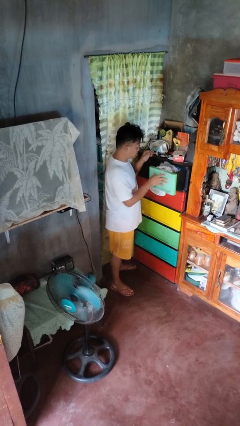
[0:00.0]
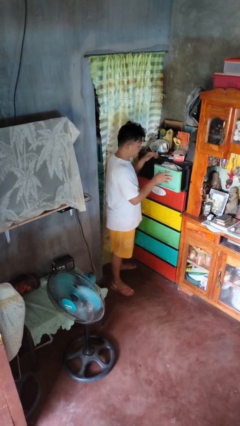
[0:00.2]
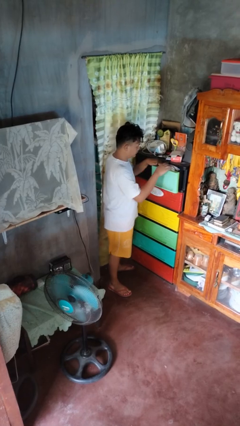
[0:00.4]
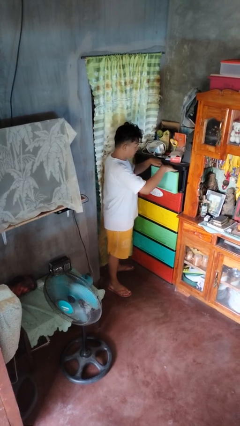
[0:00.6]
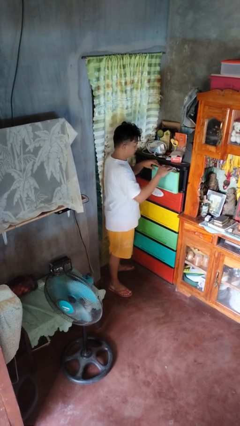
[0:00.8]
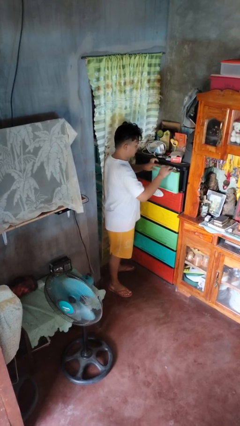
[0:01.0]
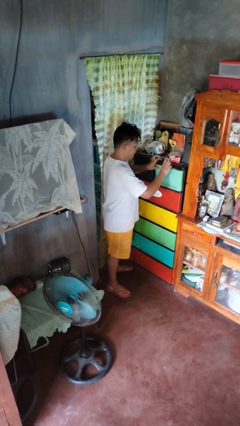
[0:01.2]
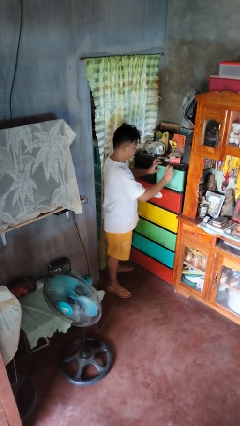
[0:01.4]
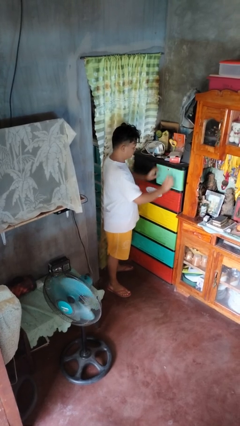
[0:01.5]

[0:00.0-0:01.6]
person closes dresser drawer

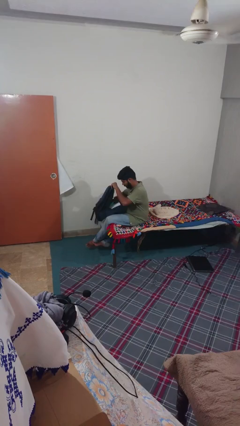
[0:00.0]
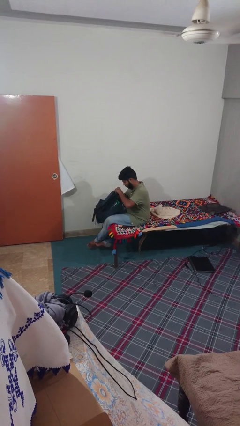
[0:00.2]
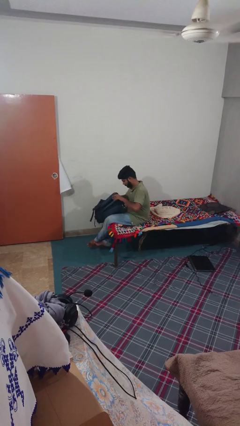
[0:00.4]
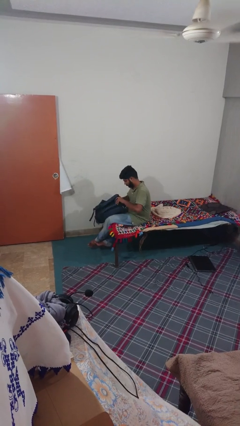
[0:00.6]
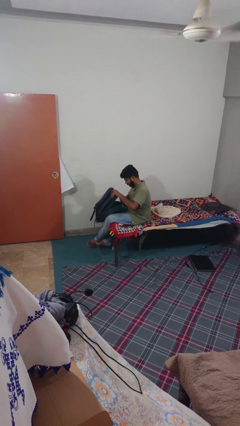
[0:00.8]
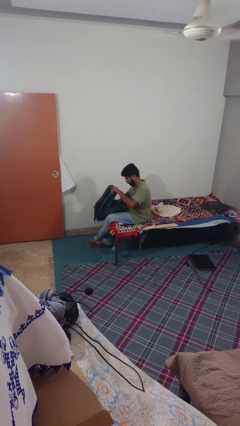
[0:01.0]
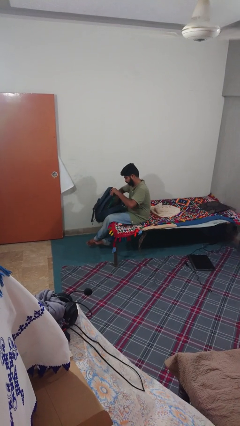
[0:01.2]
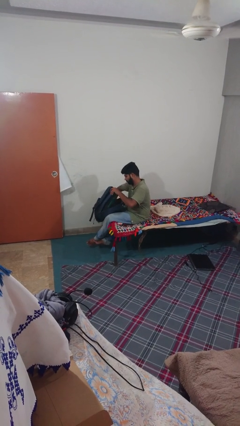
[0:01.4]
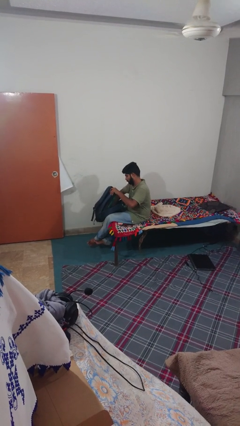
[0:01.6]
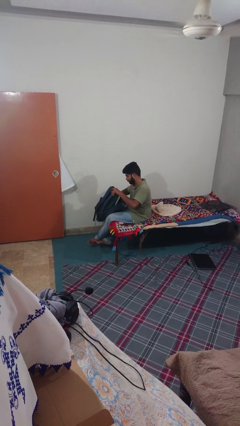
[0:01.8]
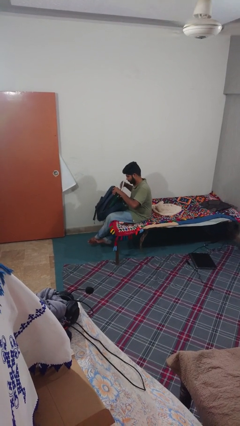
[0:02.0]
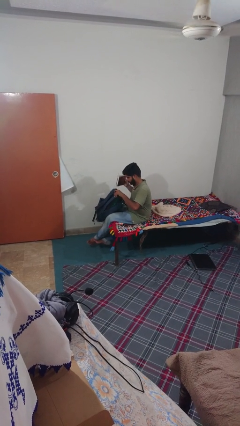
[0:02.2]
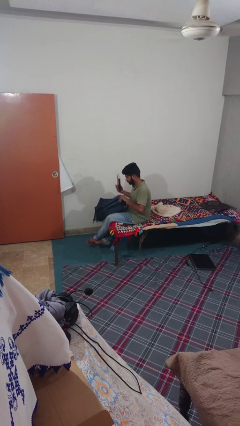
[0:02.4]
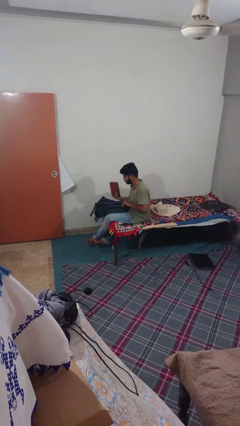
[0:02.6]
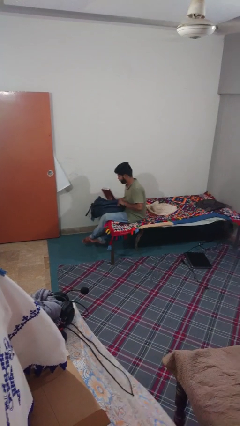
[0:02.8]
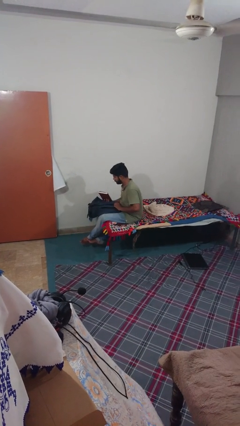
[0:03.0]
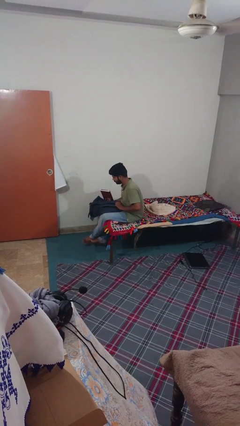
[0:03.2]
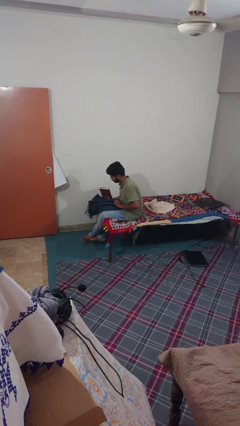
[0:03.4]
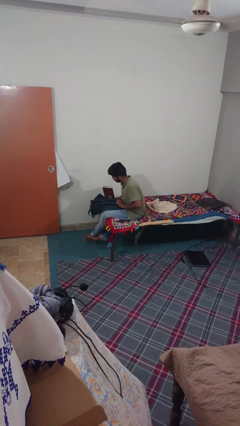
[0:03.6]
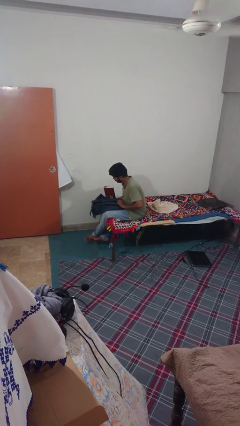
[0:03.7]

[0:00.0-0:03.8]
person takes object from backpack

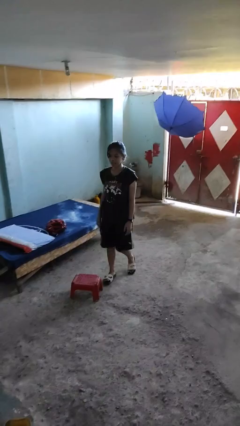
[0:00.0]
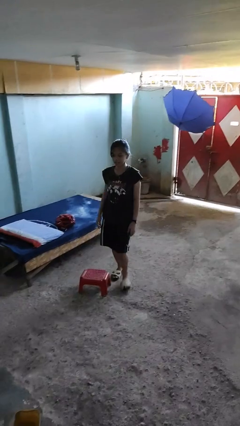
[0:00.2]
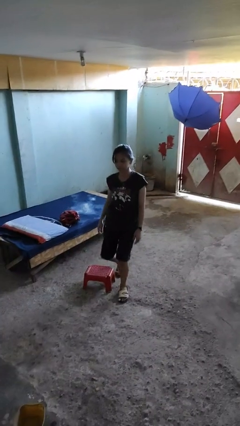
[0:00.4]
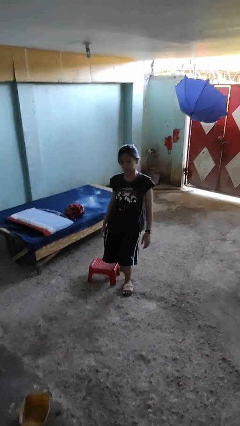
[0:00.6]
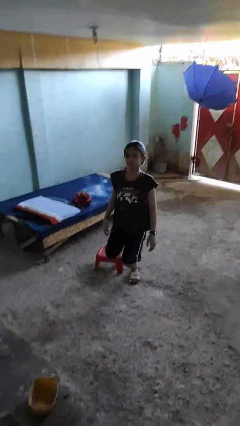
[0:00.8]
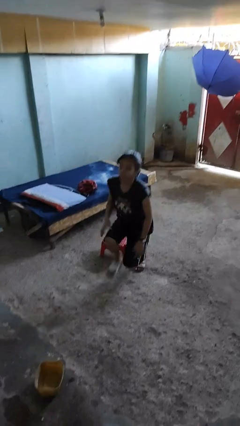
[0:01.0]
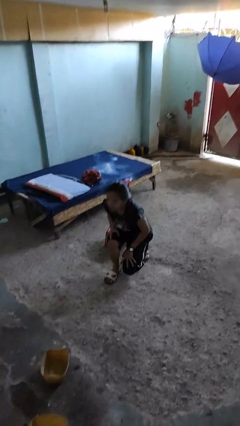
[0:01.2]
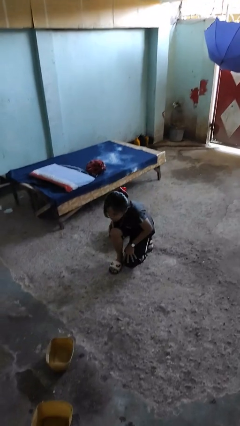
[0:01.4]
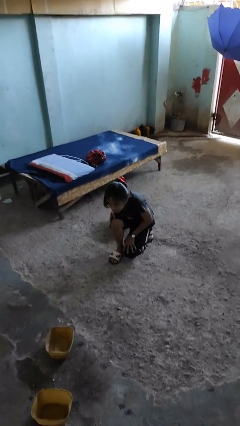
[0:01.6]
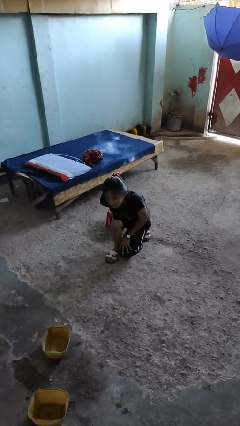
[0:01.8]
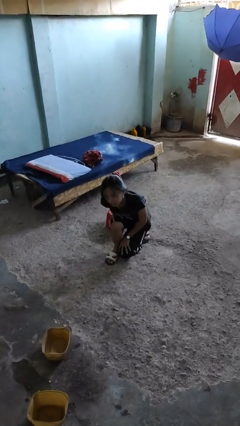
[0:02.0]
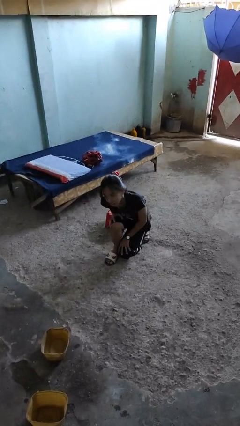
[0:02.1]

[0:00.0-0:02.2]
person trips on object on floor

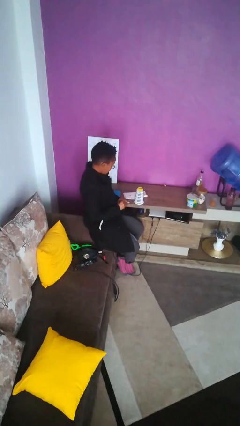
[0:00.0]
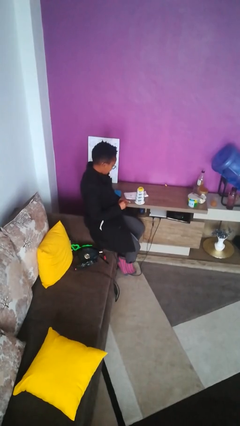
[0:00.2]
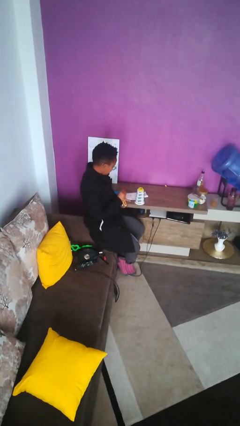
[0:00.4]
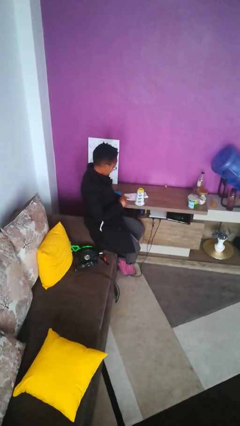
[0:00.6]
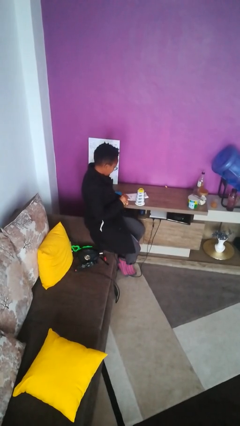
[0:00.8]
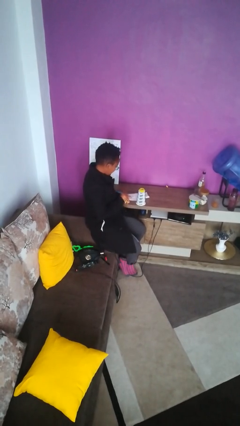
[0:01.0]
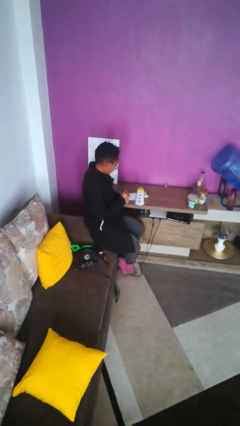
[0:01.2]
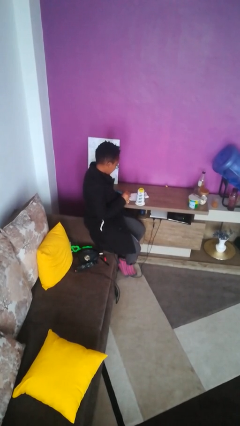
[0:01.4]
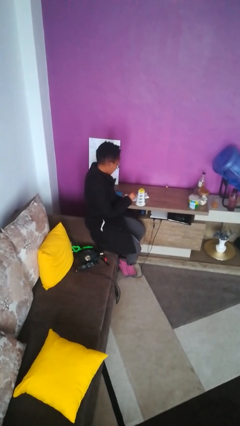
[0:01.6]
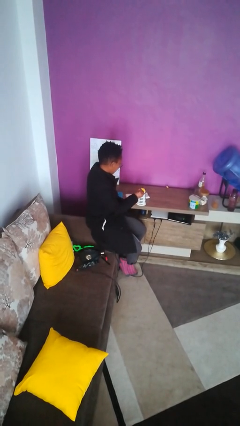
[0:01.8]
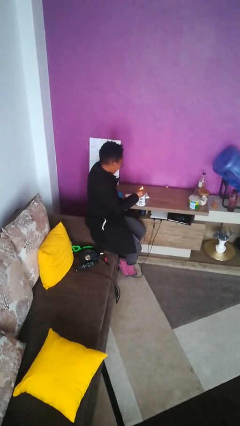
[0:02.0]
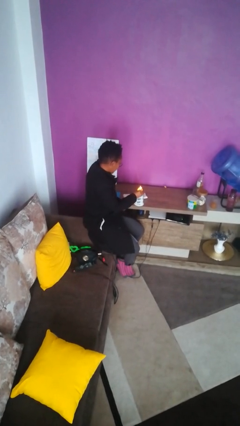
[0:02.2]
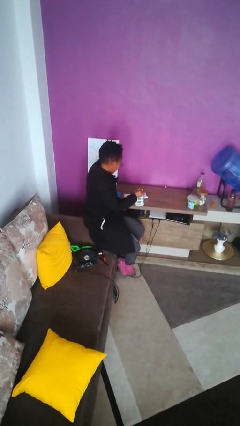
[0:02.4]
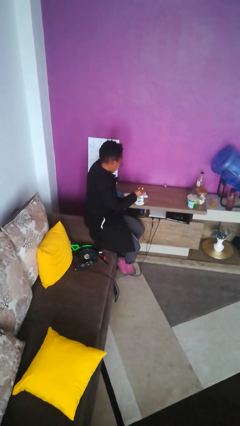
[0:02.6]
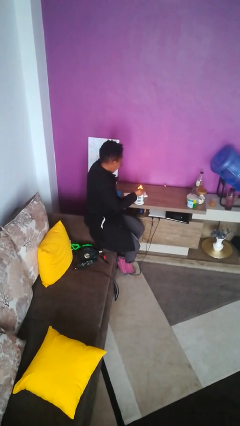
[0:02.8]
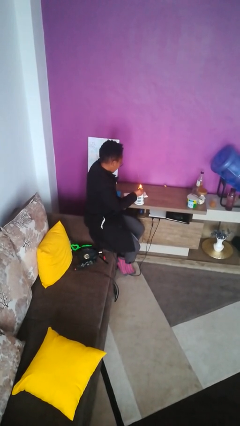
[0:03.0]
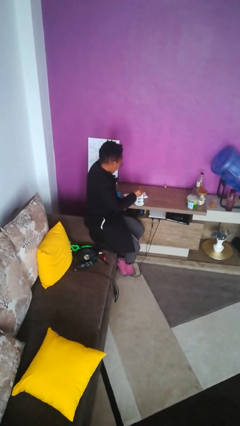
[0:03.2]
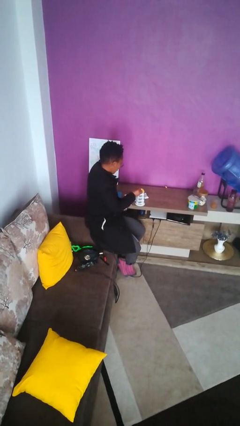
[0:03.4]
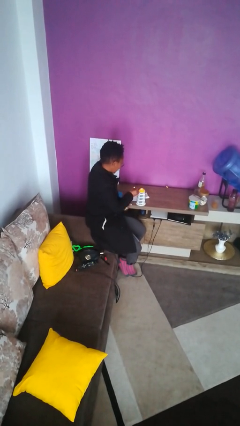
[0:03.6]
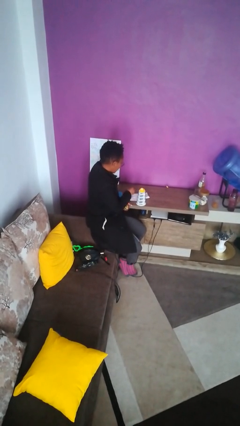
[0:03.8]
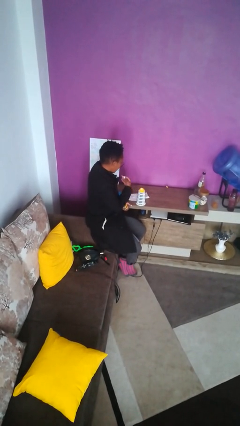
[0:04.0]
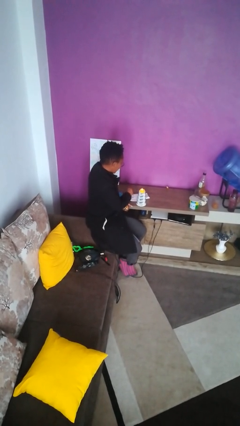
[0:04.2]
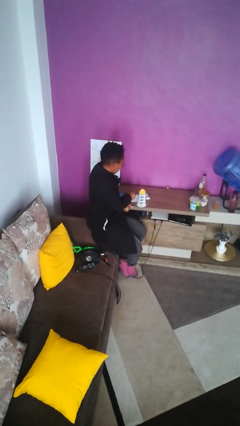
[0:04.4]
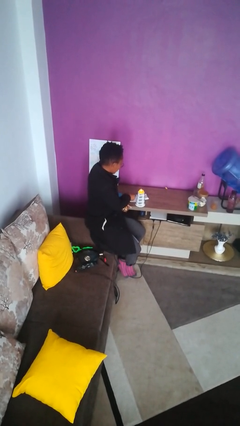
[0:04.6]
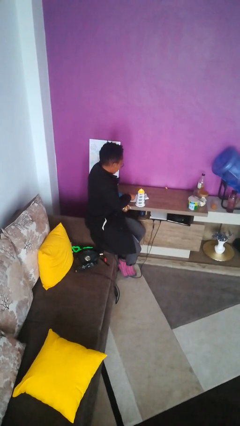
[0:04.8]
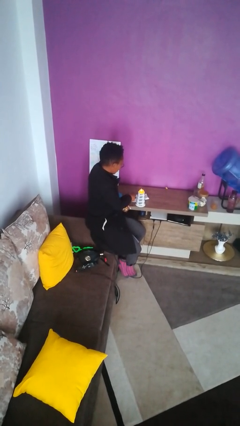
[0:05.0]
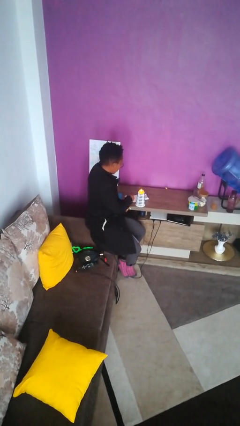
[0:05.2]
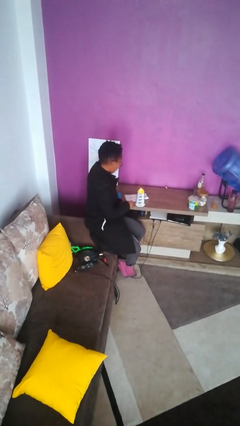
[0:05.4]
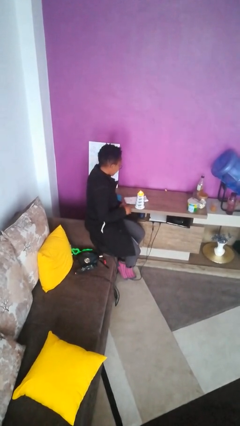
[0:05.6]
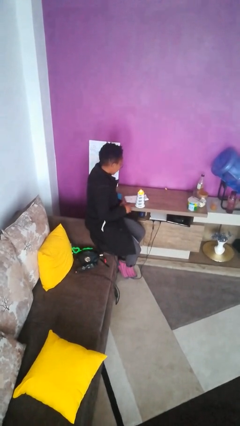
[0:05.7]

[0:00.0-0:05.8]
person lights candle

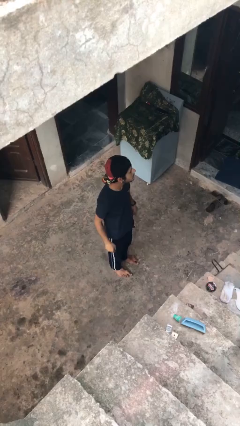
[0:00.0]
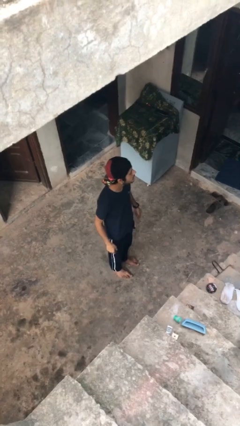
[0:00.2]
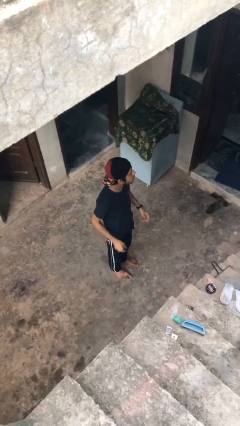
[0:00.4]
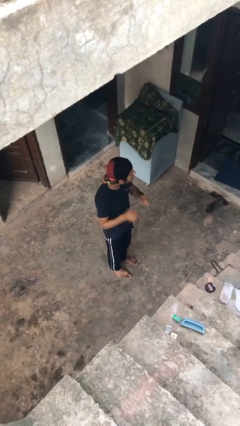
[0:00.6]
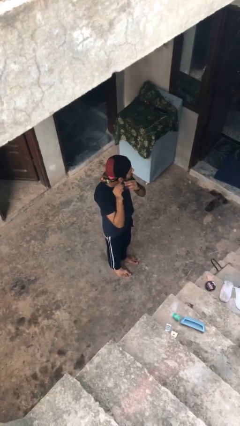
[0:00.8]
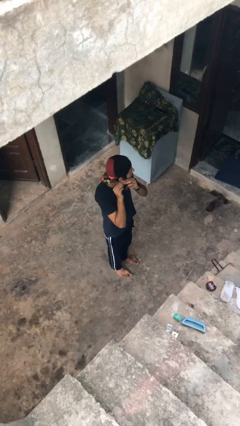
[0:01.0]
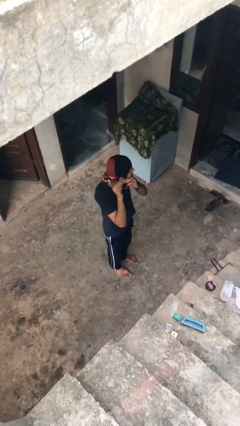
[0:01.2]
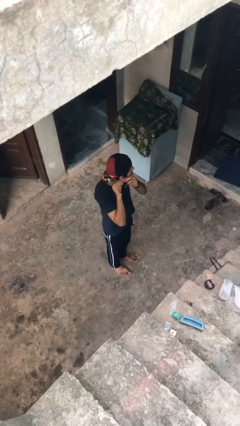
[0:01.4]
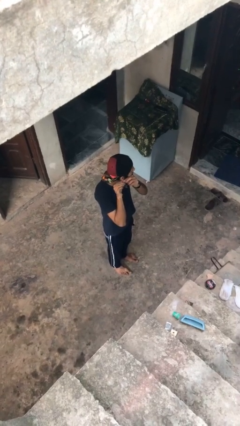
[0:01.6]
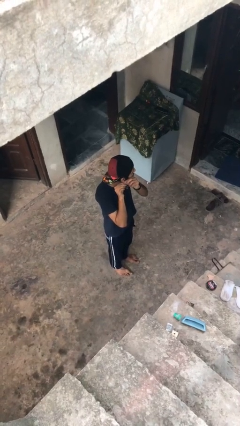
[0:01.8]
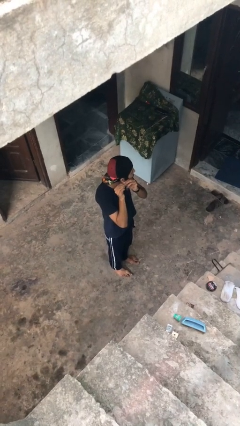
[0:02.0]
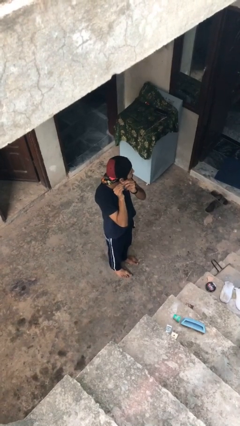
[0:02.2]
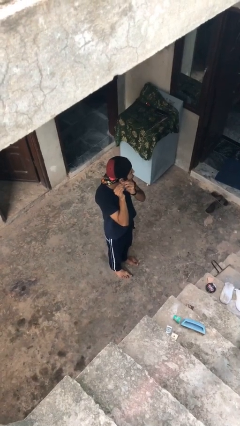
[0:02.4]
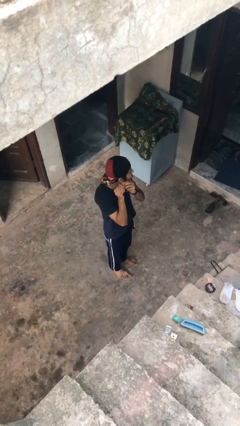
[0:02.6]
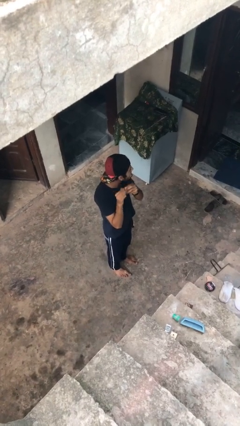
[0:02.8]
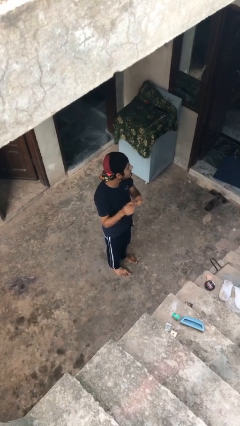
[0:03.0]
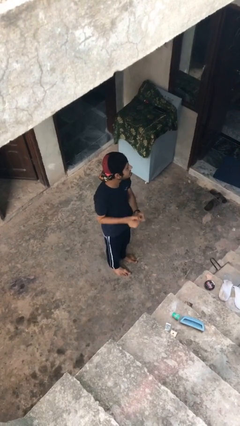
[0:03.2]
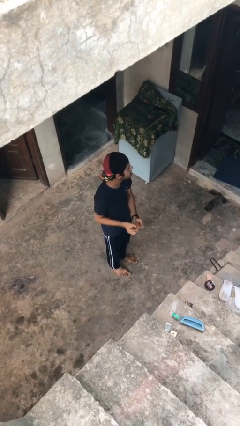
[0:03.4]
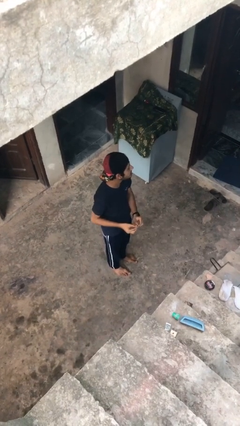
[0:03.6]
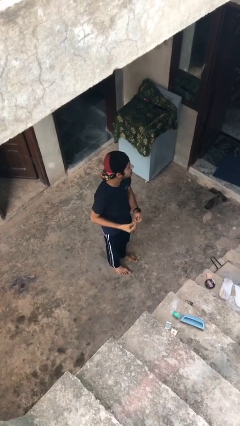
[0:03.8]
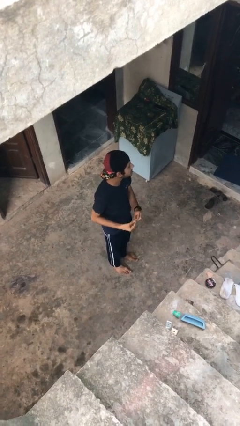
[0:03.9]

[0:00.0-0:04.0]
person takes off earrings
